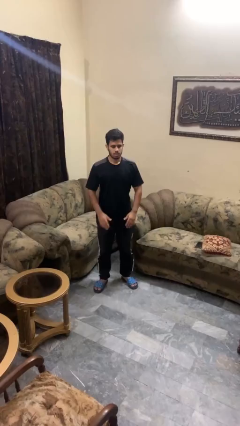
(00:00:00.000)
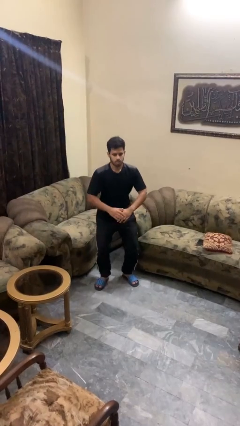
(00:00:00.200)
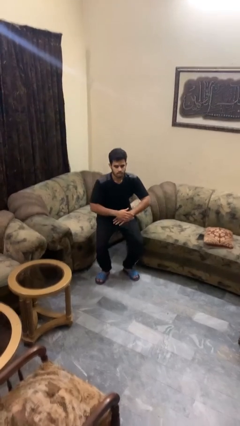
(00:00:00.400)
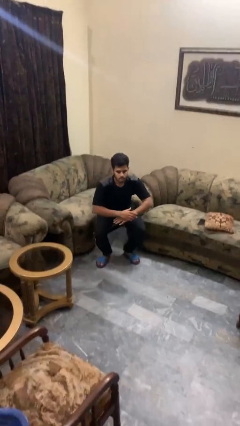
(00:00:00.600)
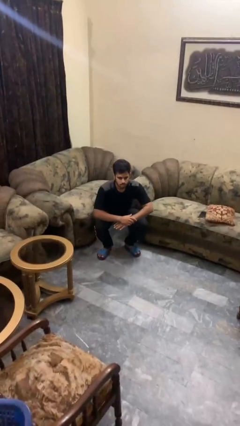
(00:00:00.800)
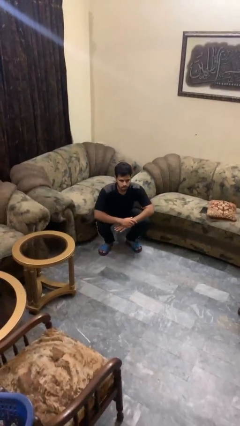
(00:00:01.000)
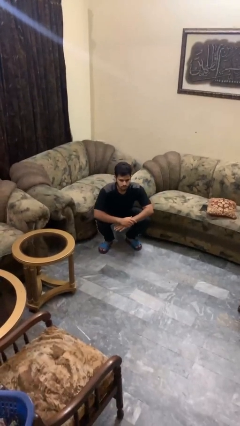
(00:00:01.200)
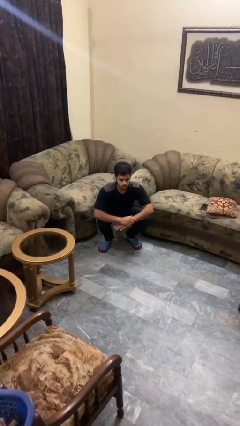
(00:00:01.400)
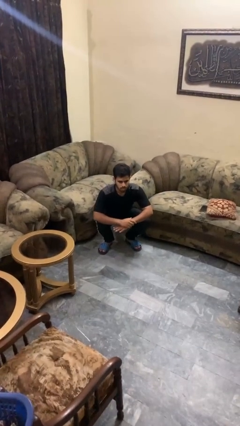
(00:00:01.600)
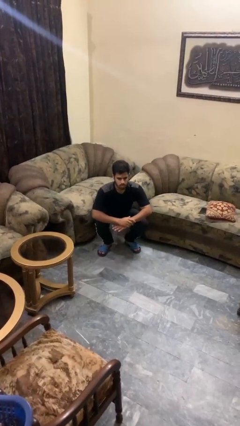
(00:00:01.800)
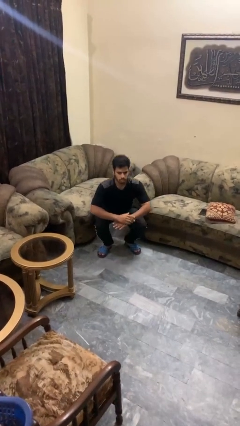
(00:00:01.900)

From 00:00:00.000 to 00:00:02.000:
person squats

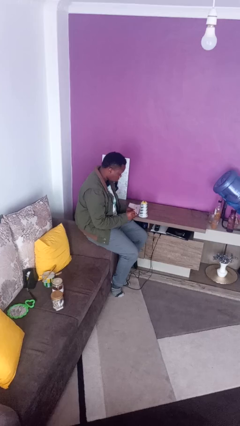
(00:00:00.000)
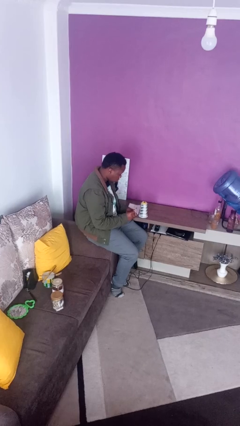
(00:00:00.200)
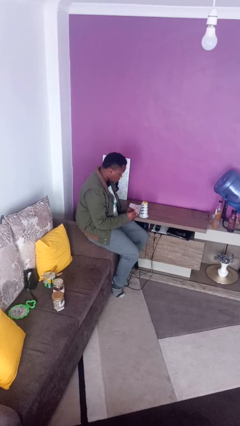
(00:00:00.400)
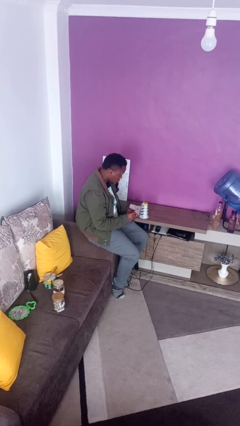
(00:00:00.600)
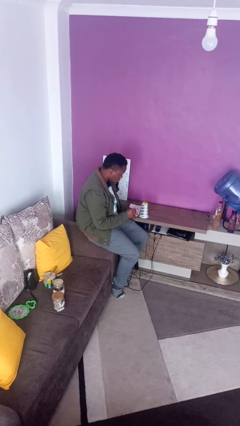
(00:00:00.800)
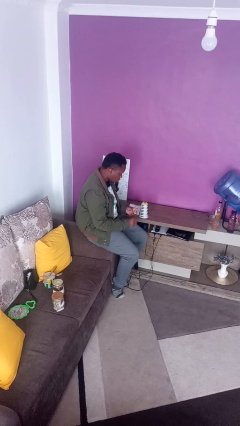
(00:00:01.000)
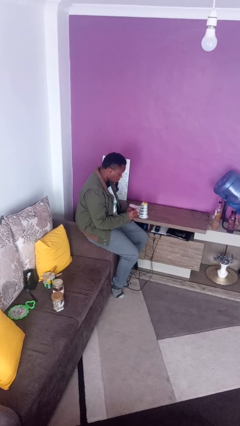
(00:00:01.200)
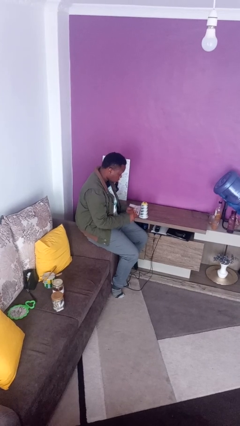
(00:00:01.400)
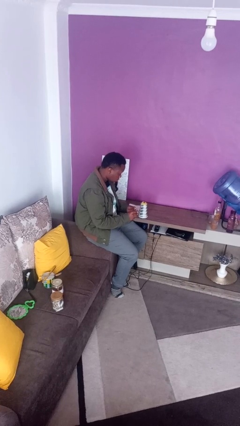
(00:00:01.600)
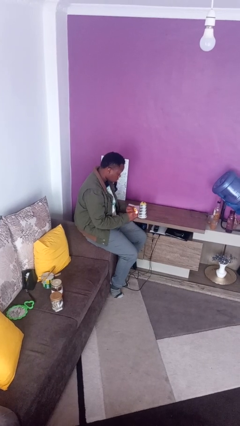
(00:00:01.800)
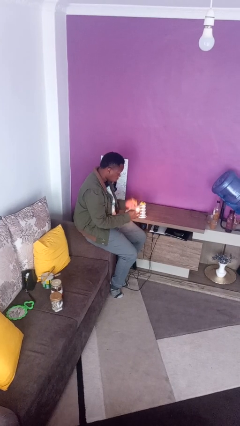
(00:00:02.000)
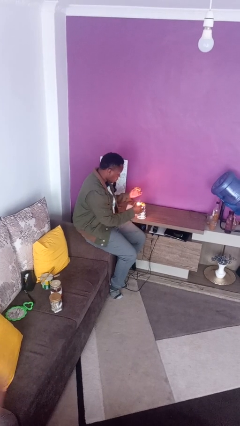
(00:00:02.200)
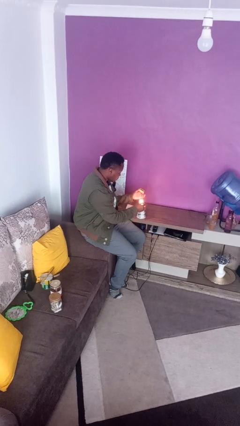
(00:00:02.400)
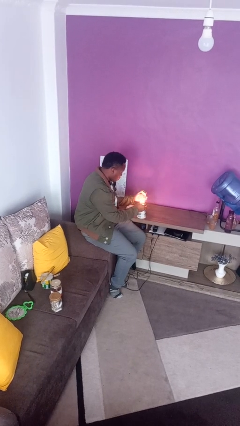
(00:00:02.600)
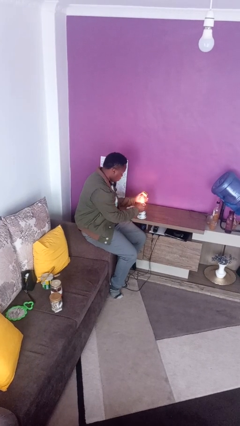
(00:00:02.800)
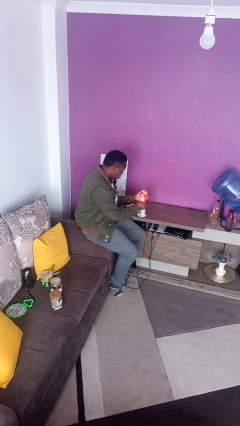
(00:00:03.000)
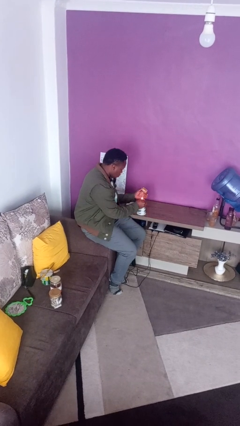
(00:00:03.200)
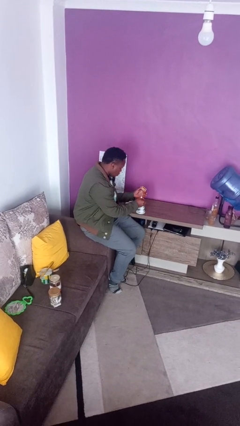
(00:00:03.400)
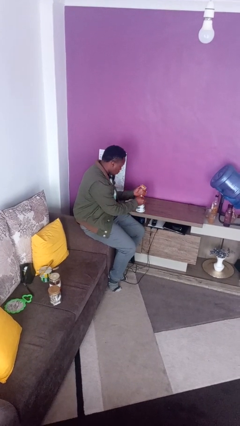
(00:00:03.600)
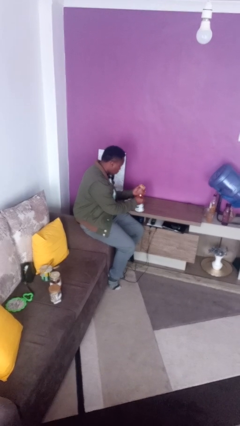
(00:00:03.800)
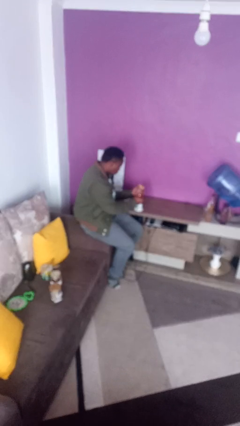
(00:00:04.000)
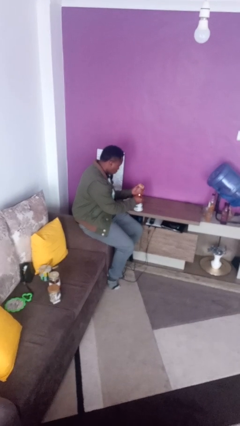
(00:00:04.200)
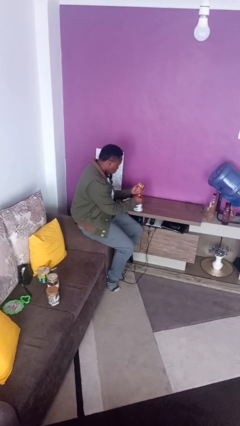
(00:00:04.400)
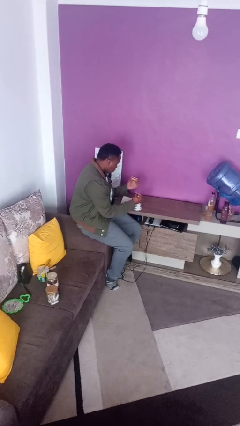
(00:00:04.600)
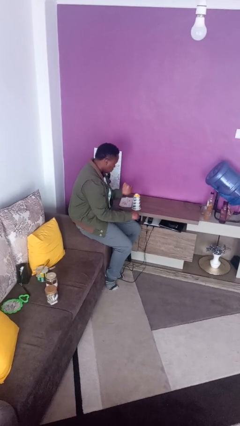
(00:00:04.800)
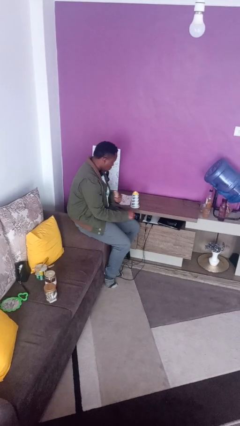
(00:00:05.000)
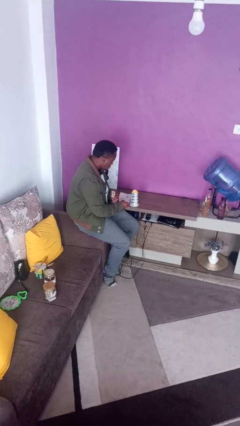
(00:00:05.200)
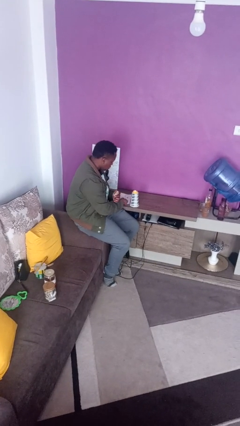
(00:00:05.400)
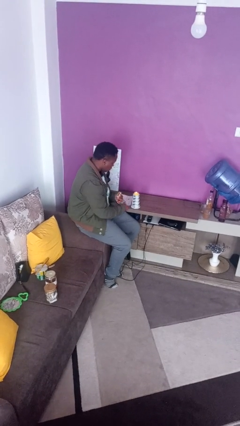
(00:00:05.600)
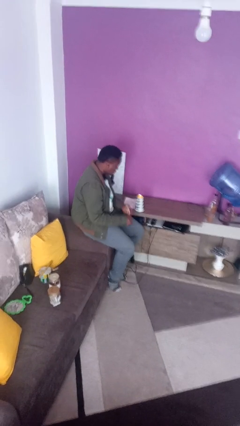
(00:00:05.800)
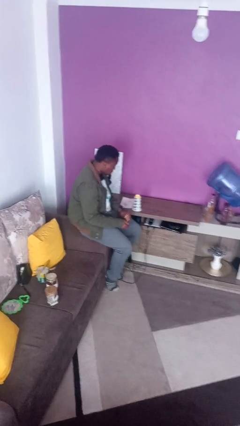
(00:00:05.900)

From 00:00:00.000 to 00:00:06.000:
person lights candle

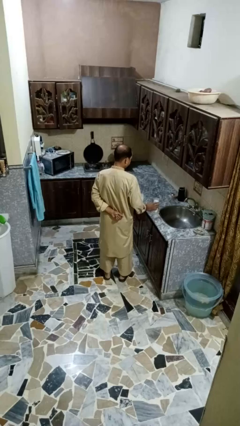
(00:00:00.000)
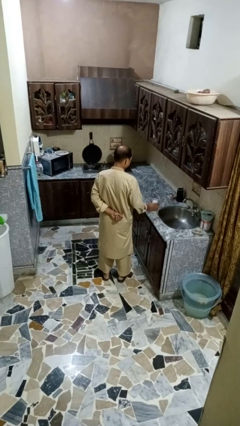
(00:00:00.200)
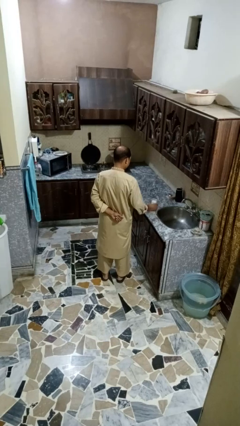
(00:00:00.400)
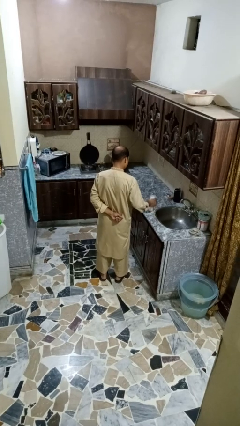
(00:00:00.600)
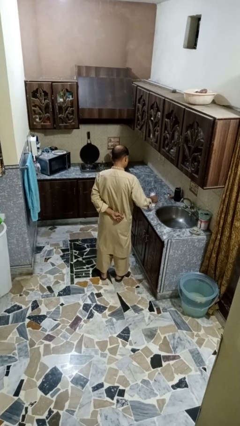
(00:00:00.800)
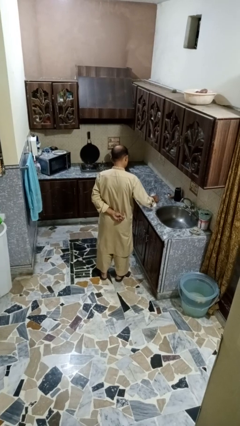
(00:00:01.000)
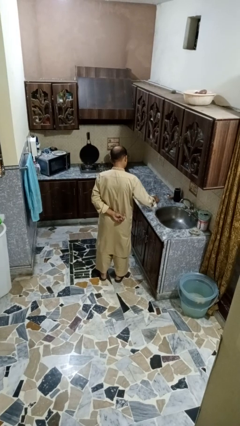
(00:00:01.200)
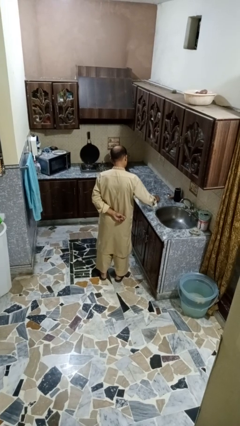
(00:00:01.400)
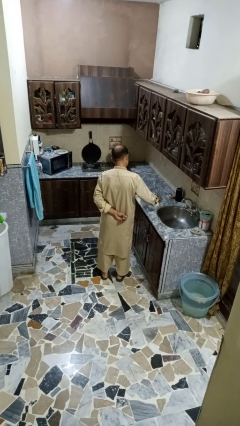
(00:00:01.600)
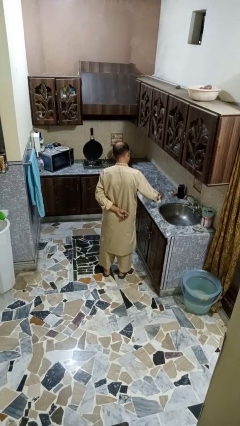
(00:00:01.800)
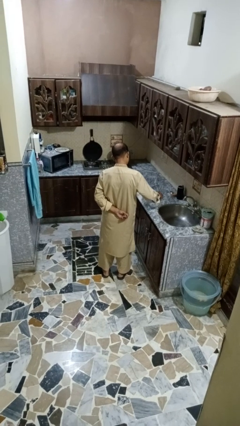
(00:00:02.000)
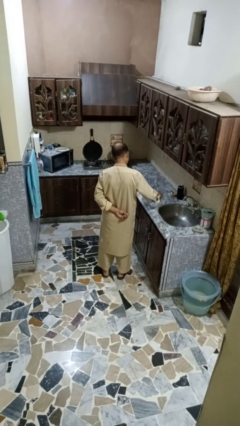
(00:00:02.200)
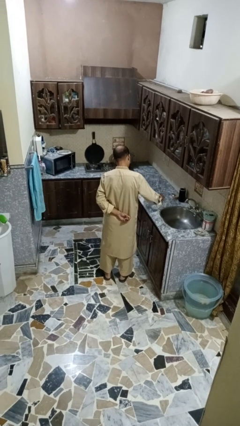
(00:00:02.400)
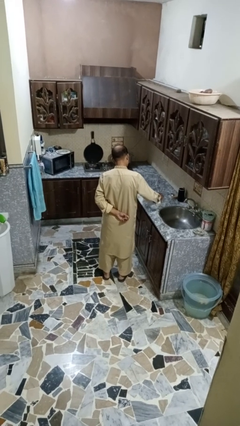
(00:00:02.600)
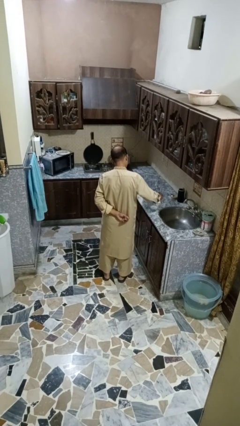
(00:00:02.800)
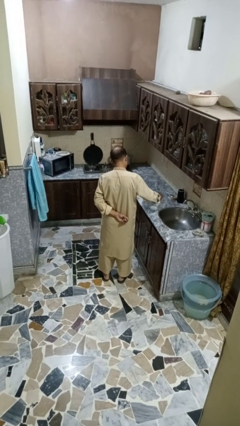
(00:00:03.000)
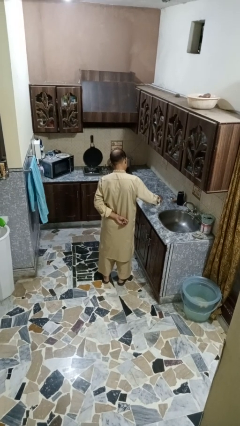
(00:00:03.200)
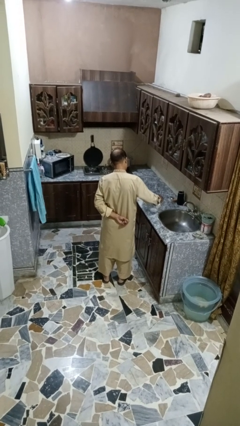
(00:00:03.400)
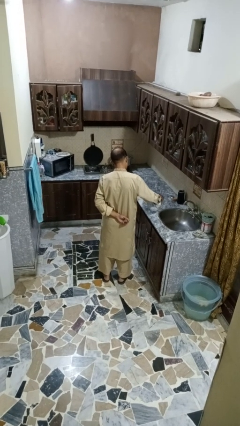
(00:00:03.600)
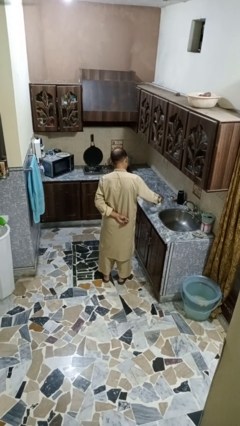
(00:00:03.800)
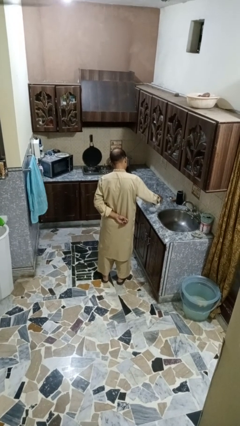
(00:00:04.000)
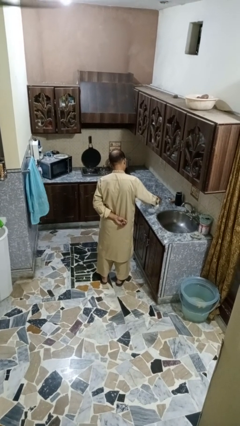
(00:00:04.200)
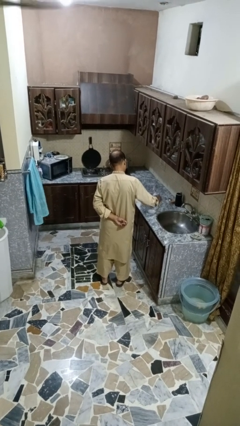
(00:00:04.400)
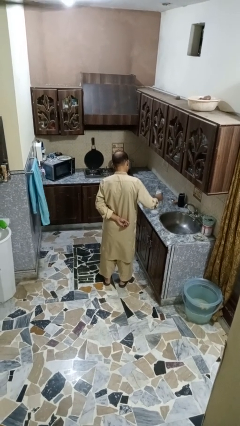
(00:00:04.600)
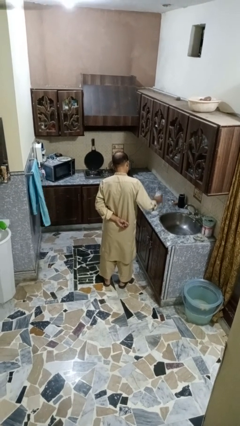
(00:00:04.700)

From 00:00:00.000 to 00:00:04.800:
person pours into bowl

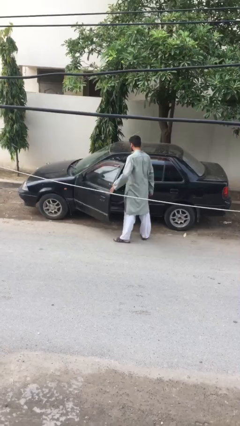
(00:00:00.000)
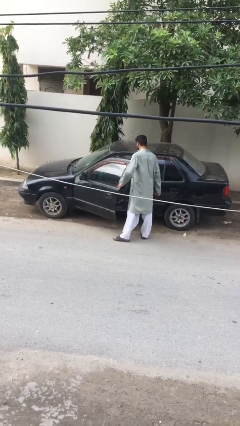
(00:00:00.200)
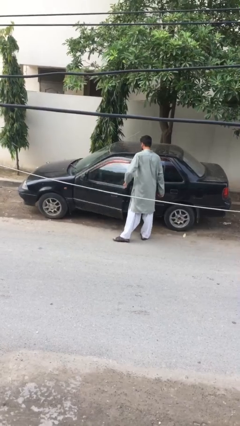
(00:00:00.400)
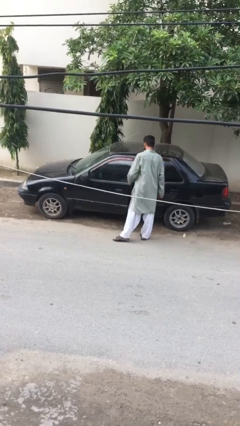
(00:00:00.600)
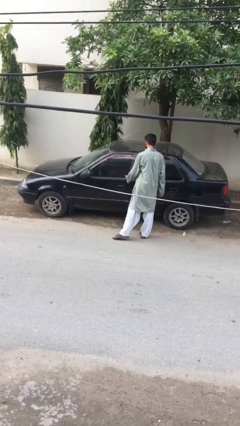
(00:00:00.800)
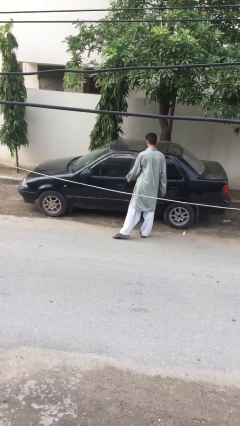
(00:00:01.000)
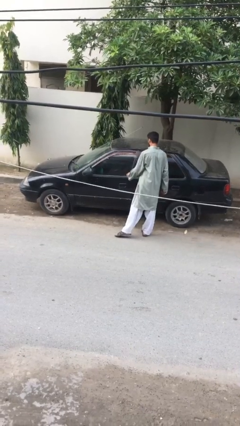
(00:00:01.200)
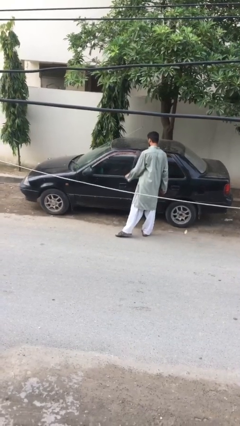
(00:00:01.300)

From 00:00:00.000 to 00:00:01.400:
person closes car door

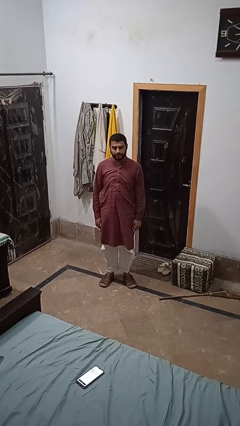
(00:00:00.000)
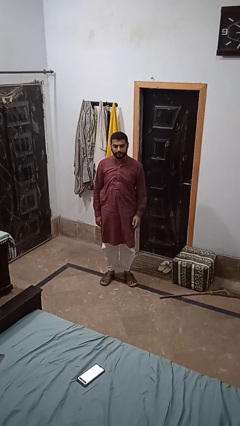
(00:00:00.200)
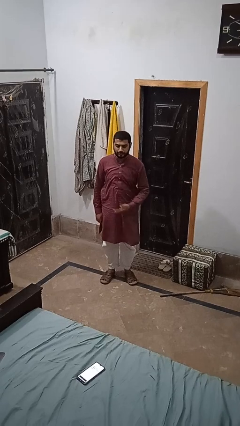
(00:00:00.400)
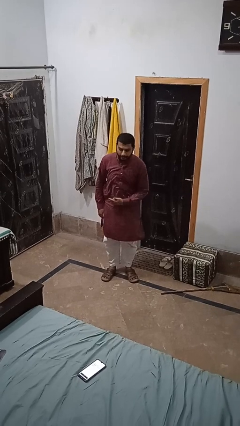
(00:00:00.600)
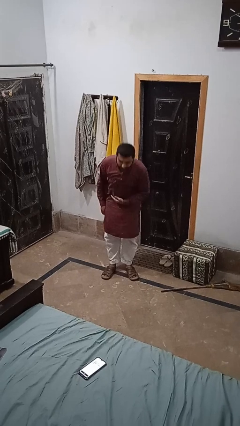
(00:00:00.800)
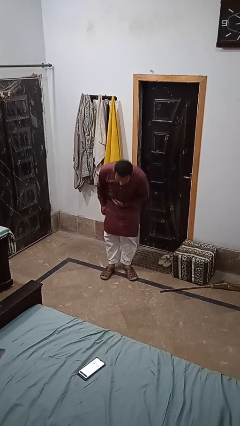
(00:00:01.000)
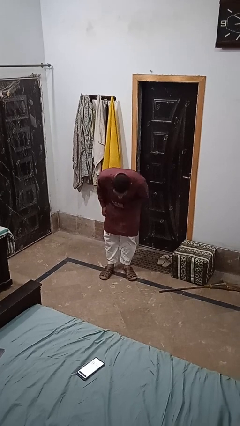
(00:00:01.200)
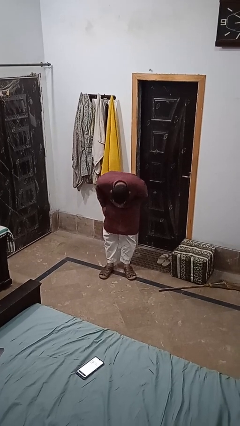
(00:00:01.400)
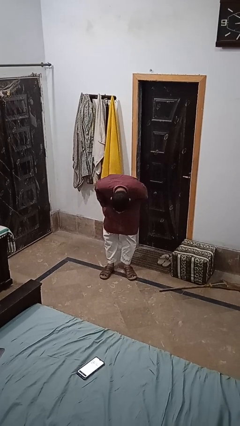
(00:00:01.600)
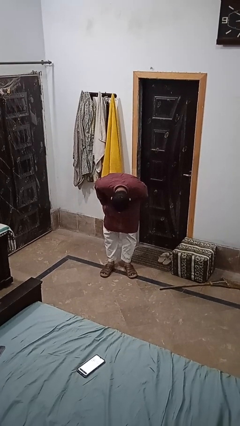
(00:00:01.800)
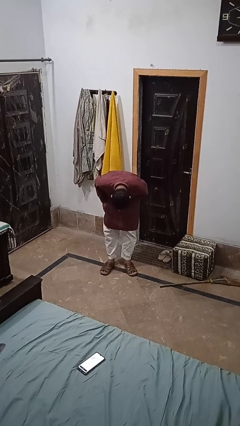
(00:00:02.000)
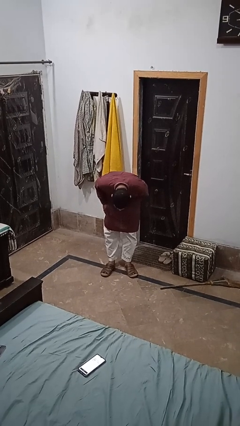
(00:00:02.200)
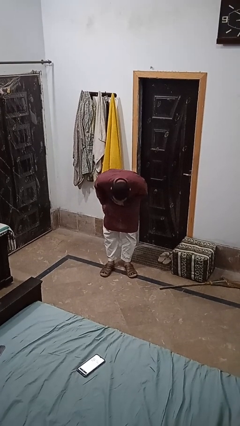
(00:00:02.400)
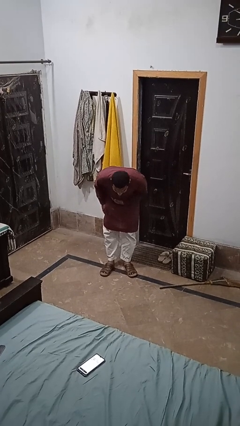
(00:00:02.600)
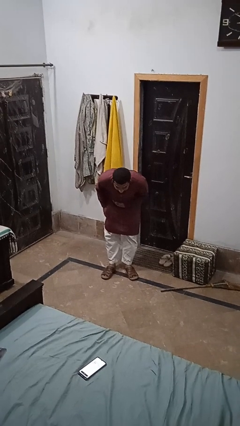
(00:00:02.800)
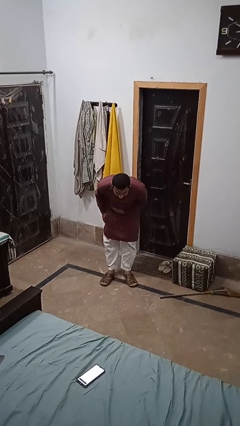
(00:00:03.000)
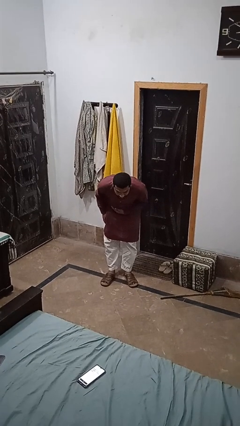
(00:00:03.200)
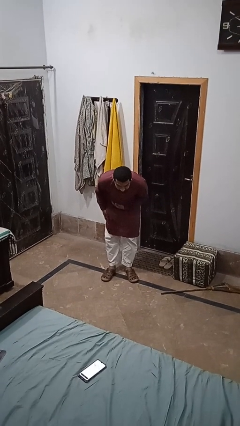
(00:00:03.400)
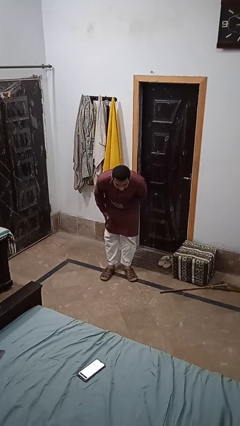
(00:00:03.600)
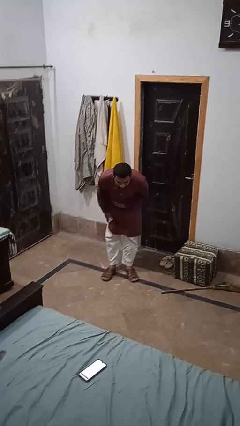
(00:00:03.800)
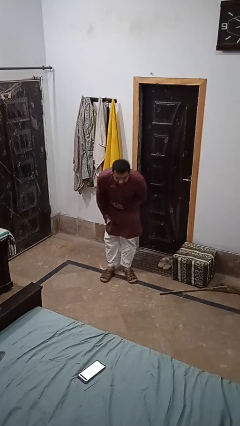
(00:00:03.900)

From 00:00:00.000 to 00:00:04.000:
person bows
